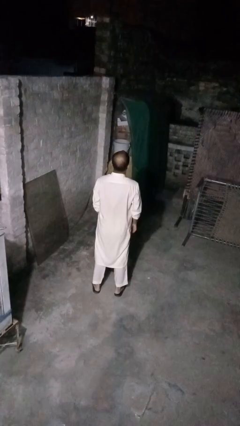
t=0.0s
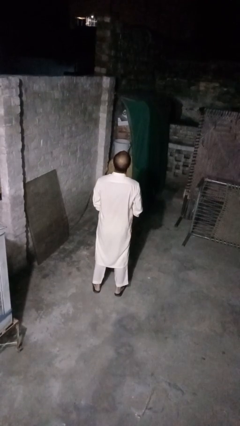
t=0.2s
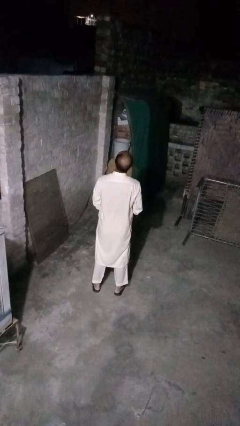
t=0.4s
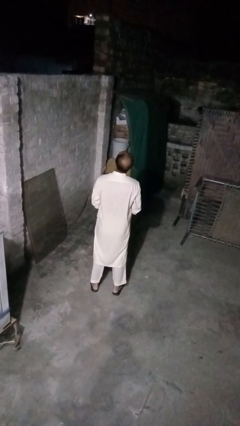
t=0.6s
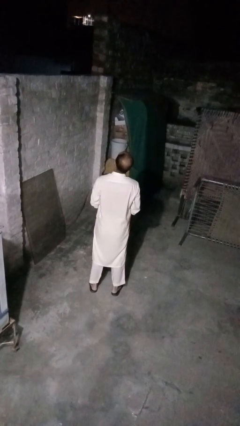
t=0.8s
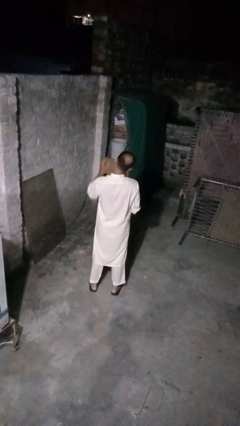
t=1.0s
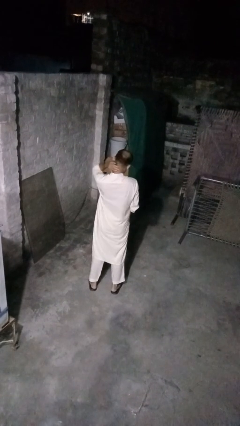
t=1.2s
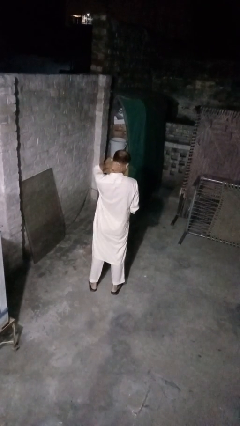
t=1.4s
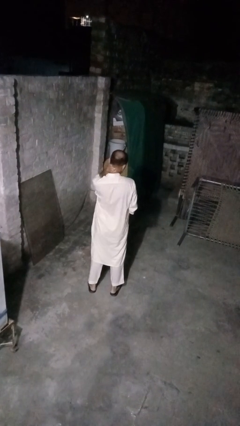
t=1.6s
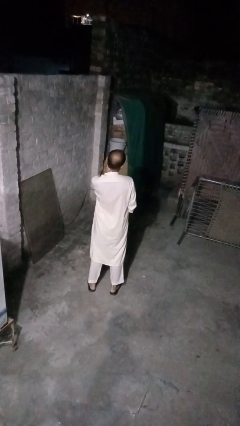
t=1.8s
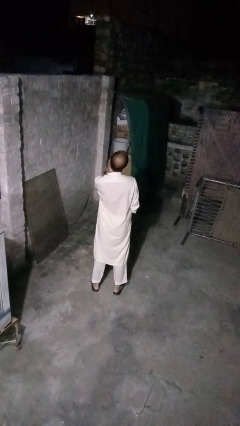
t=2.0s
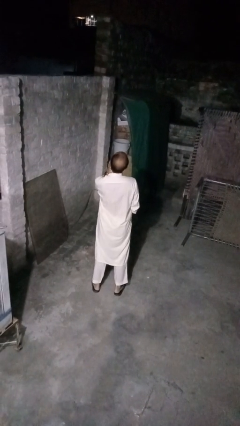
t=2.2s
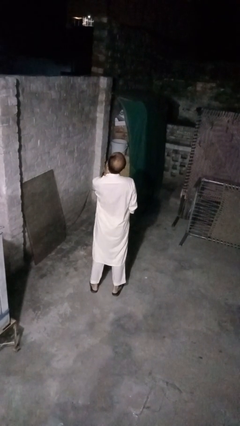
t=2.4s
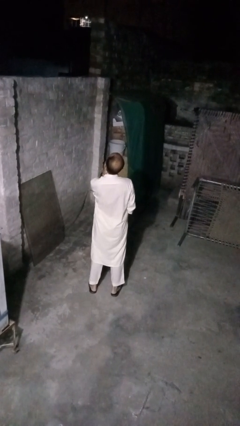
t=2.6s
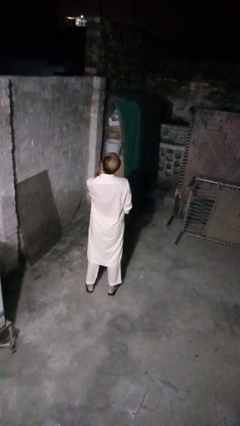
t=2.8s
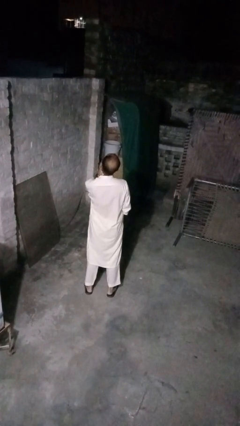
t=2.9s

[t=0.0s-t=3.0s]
person rubs neck

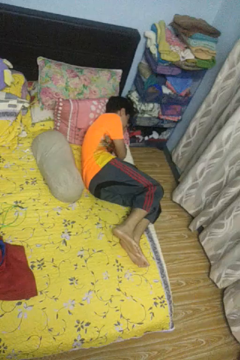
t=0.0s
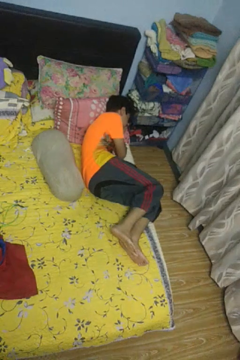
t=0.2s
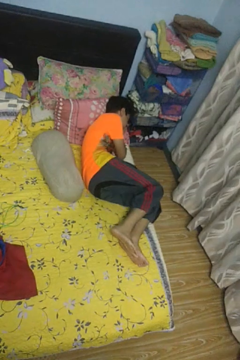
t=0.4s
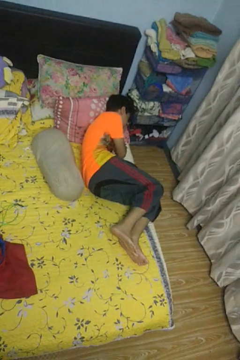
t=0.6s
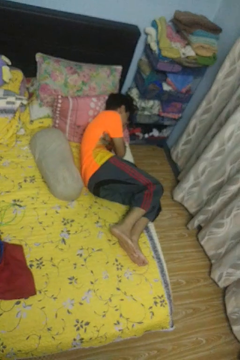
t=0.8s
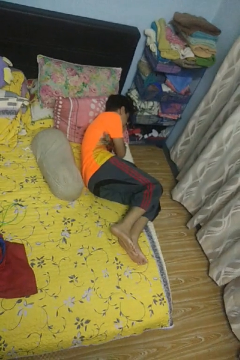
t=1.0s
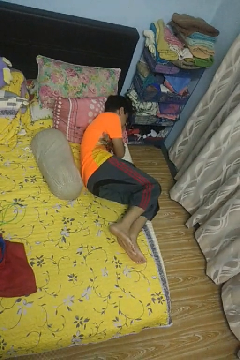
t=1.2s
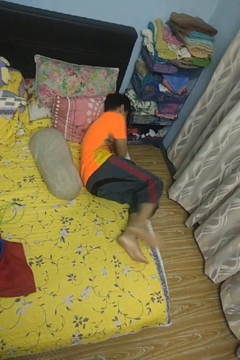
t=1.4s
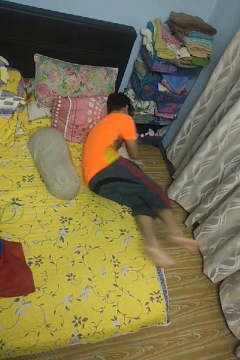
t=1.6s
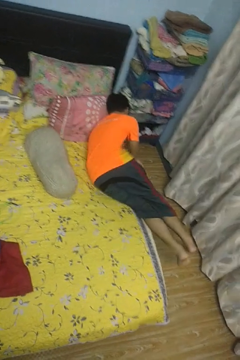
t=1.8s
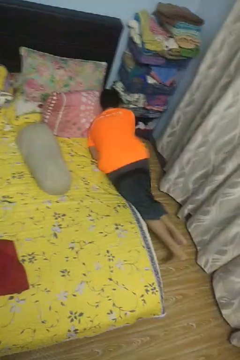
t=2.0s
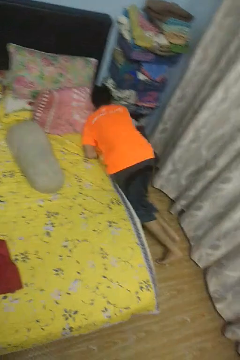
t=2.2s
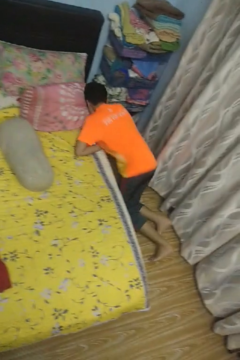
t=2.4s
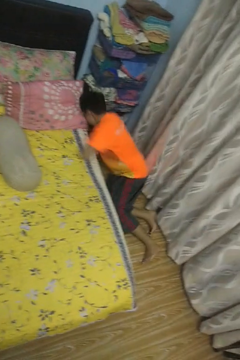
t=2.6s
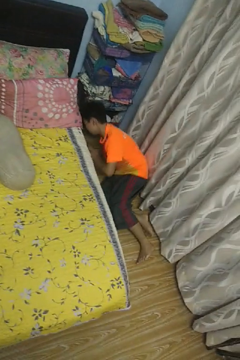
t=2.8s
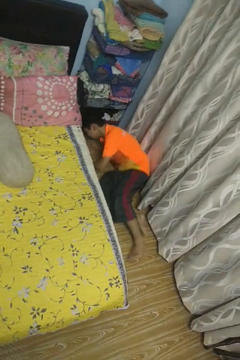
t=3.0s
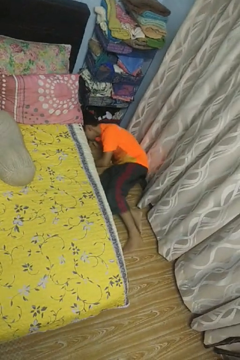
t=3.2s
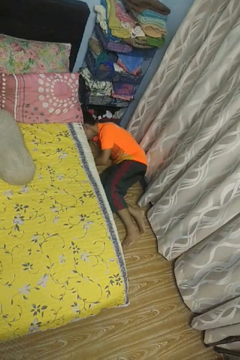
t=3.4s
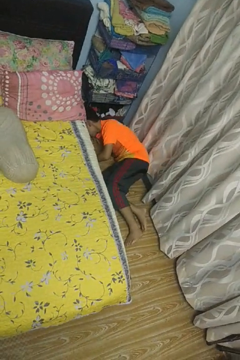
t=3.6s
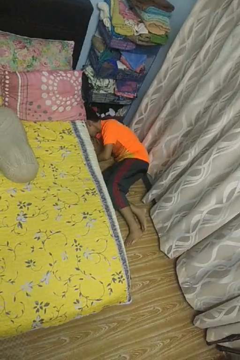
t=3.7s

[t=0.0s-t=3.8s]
person falls from bed

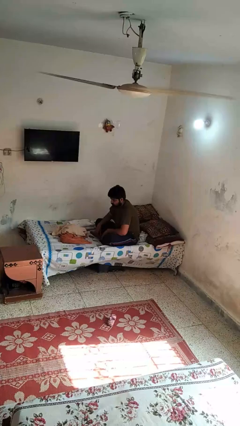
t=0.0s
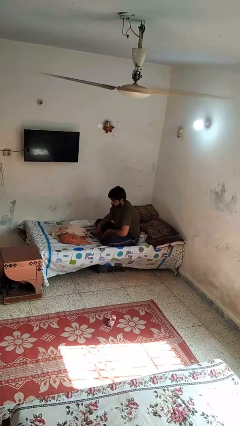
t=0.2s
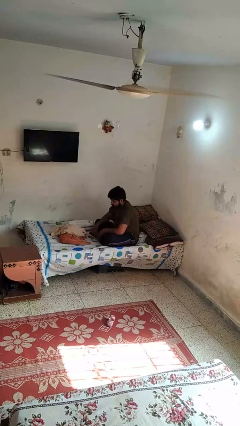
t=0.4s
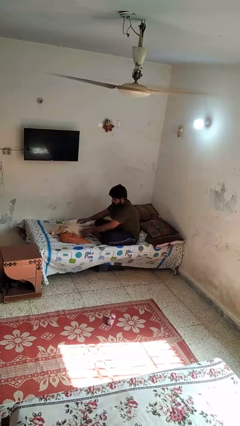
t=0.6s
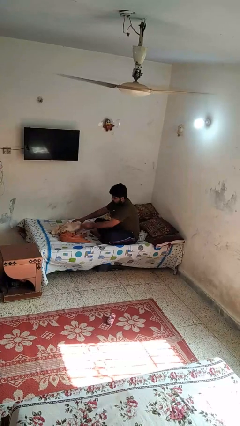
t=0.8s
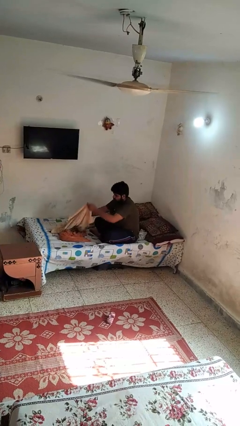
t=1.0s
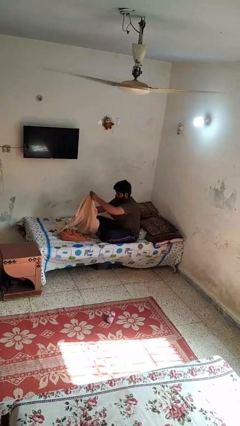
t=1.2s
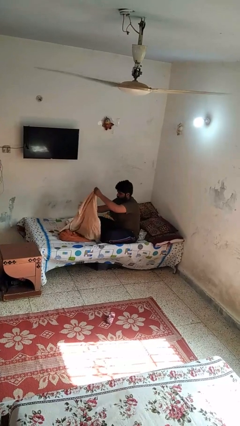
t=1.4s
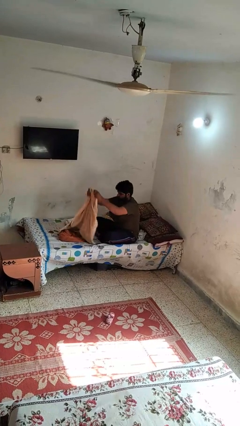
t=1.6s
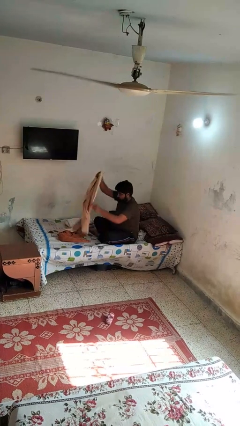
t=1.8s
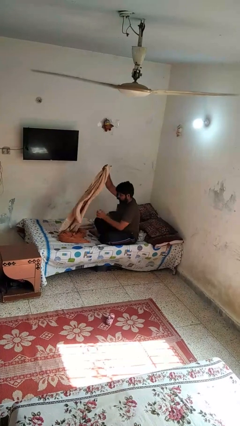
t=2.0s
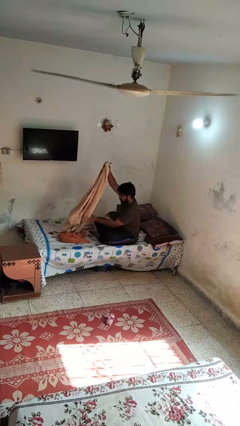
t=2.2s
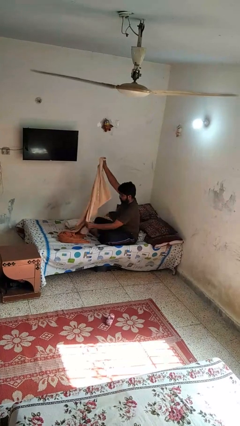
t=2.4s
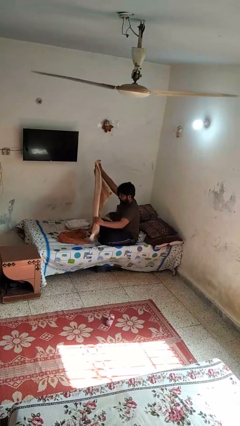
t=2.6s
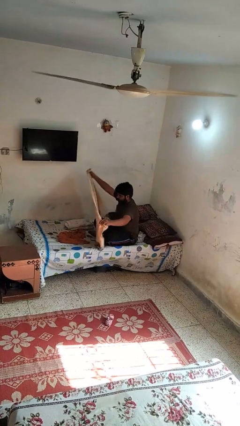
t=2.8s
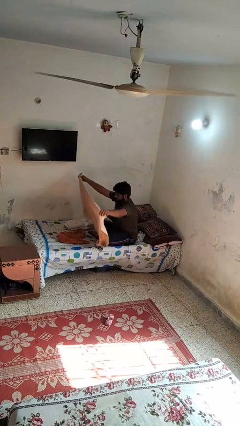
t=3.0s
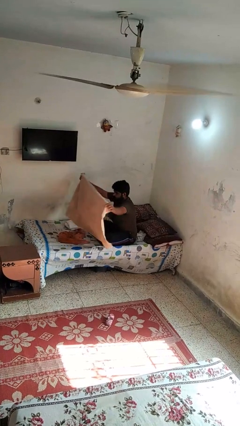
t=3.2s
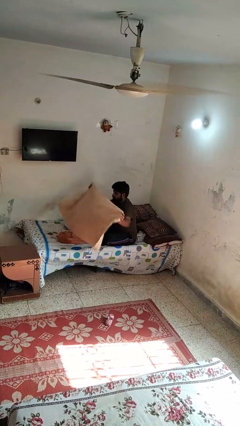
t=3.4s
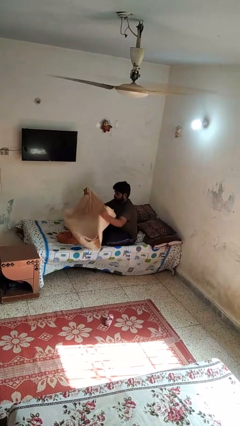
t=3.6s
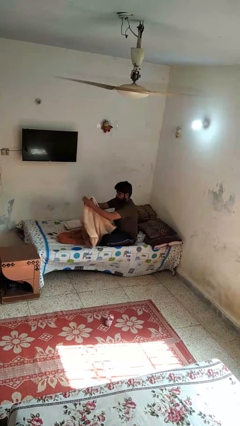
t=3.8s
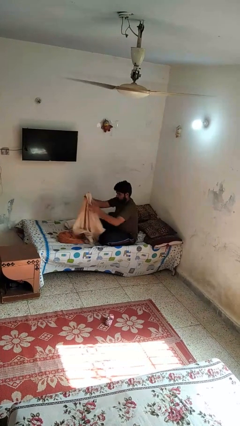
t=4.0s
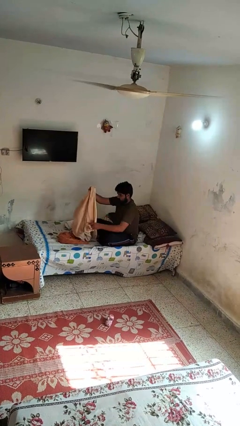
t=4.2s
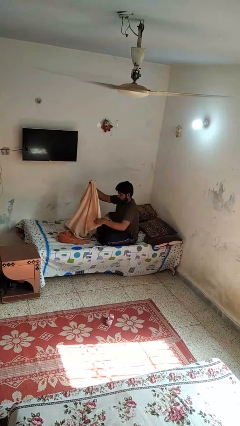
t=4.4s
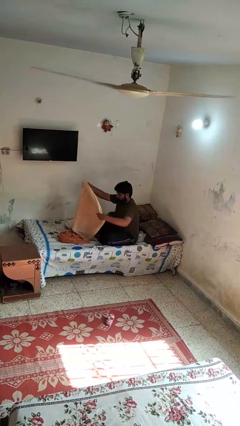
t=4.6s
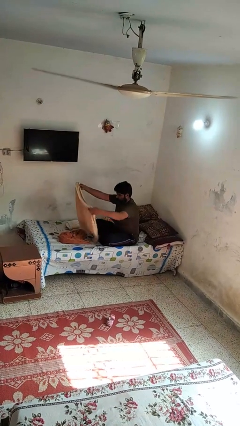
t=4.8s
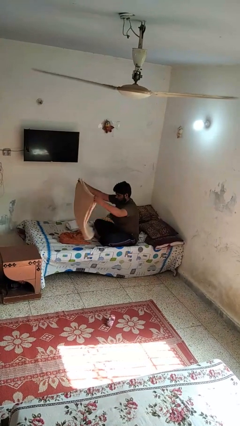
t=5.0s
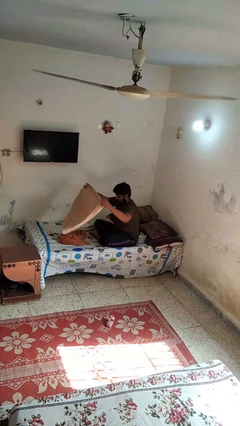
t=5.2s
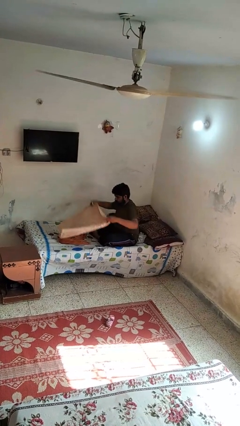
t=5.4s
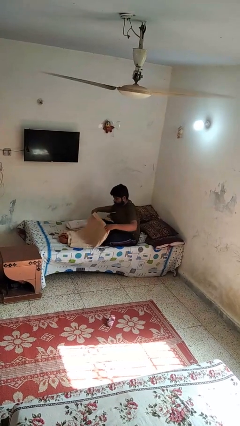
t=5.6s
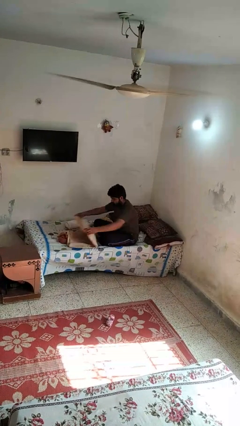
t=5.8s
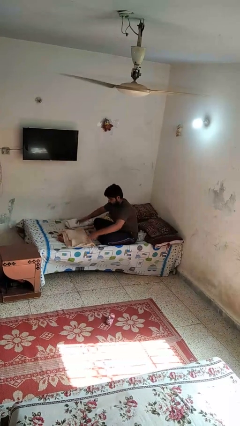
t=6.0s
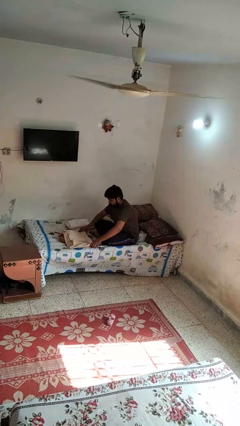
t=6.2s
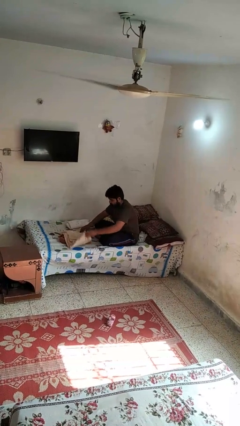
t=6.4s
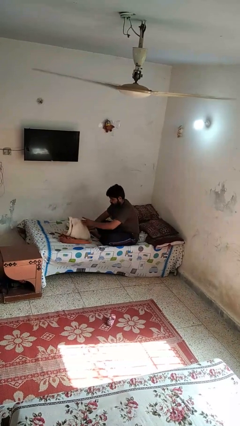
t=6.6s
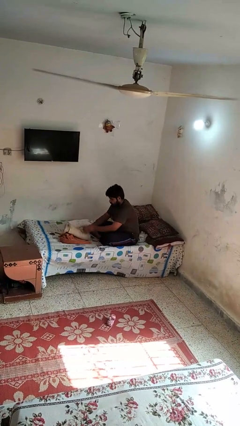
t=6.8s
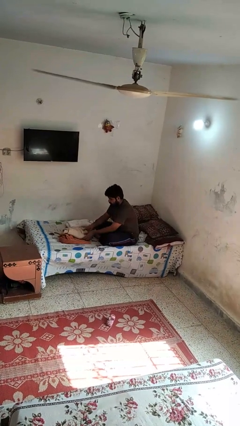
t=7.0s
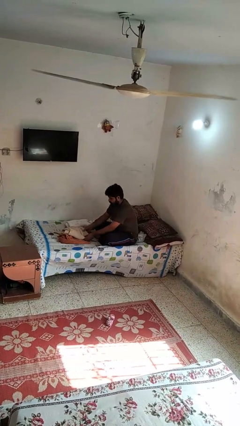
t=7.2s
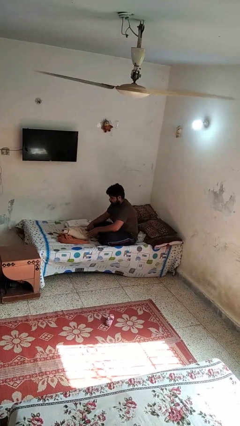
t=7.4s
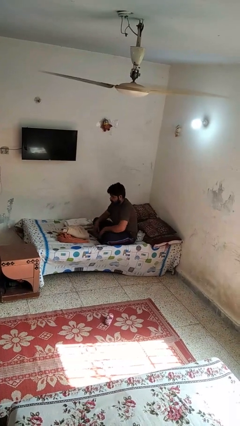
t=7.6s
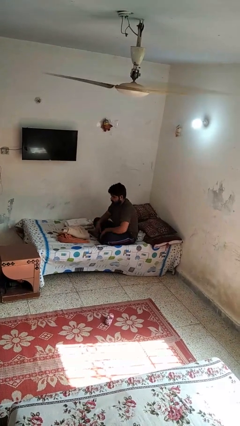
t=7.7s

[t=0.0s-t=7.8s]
person folds towel

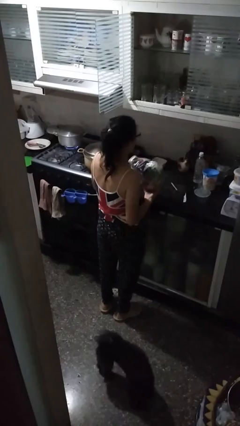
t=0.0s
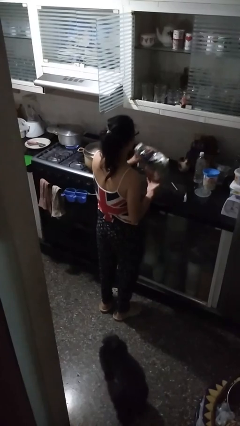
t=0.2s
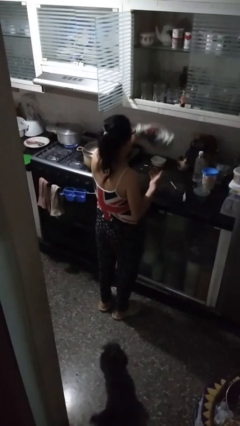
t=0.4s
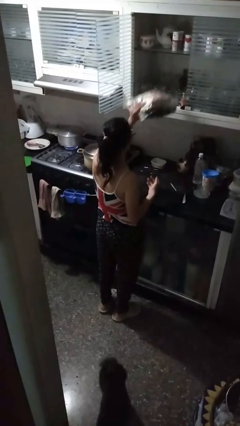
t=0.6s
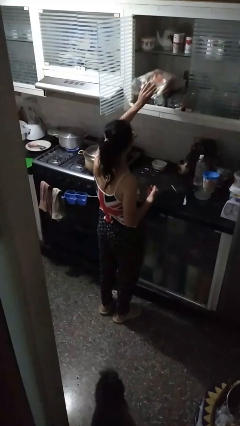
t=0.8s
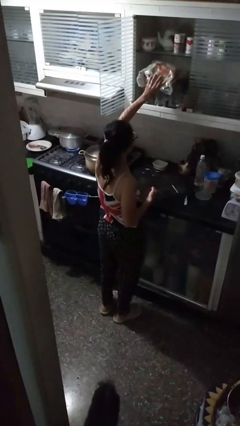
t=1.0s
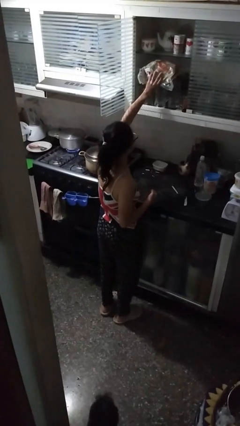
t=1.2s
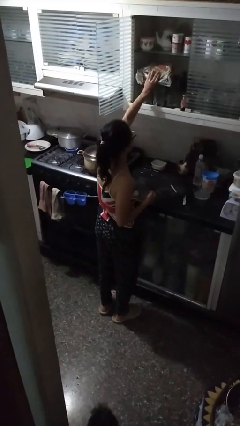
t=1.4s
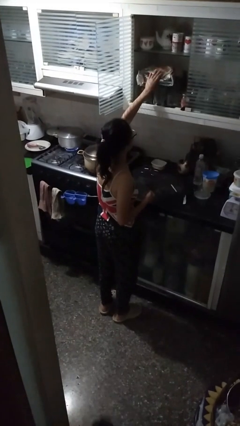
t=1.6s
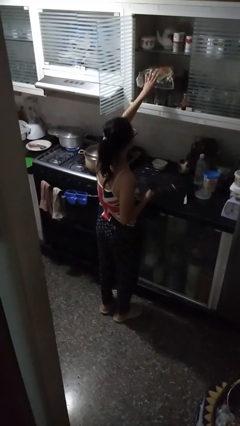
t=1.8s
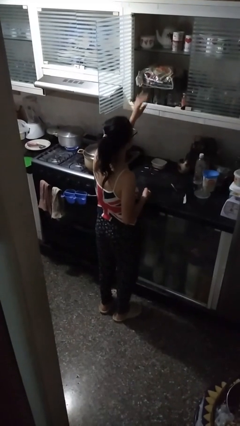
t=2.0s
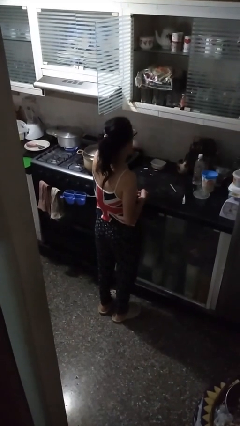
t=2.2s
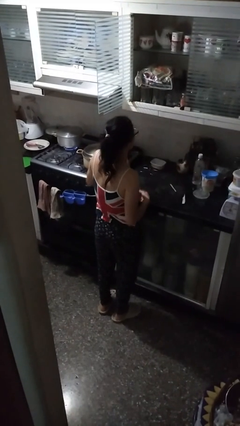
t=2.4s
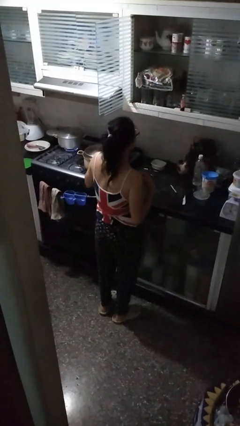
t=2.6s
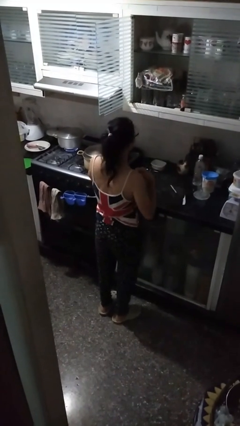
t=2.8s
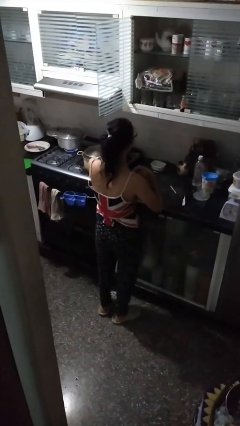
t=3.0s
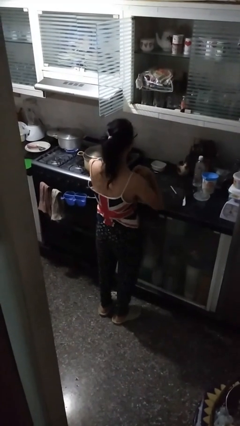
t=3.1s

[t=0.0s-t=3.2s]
person puts down object into cabinet

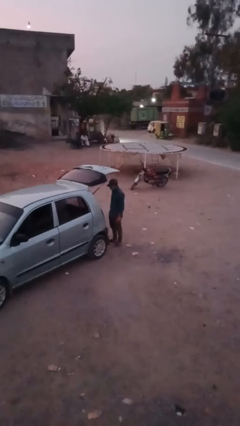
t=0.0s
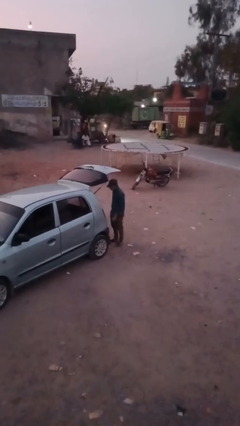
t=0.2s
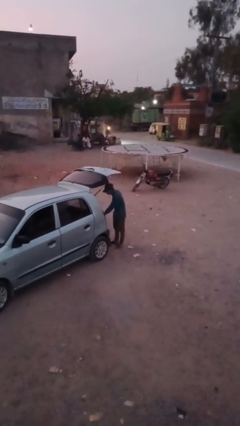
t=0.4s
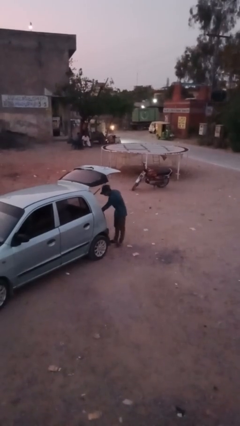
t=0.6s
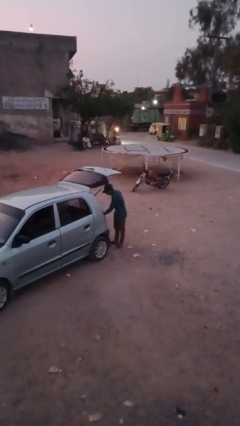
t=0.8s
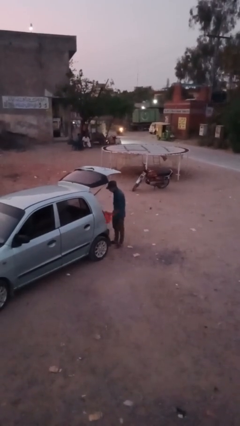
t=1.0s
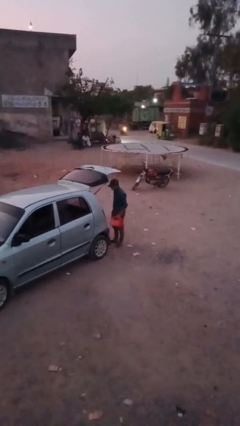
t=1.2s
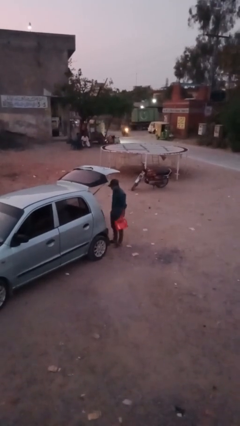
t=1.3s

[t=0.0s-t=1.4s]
person unloads car
